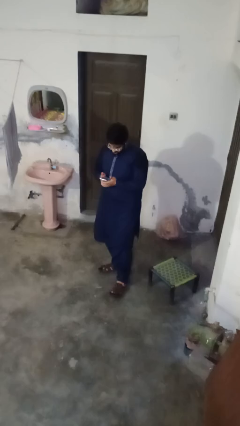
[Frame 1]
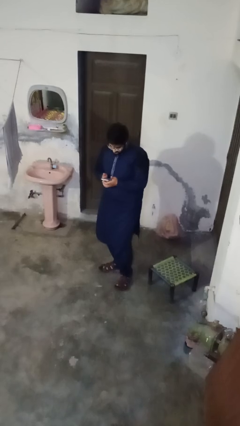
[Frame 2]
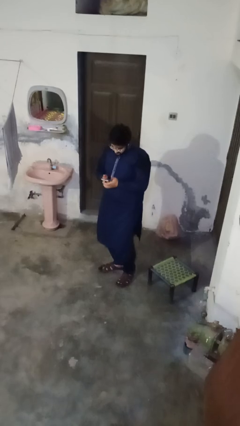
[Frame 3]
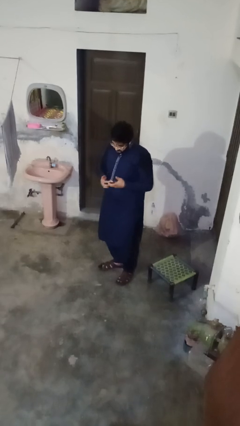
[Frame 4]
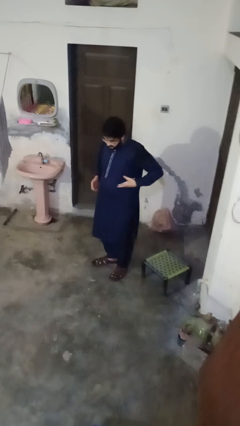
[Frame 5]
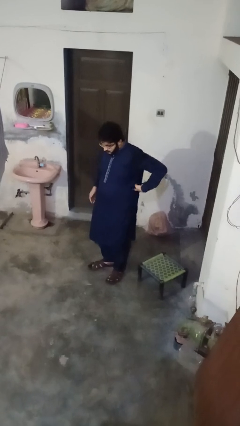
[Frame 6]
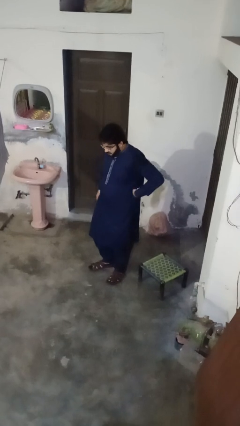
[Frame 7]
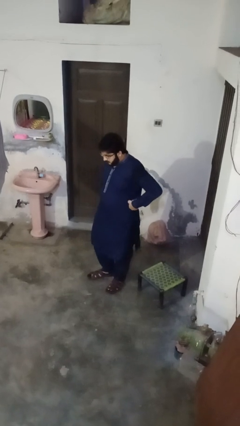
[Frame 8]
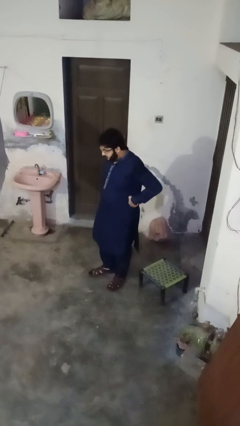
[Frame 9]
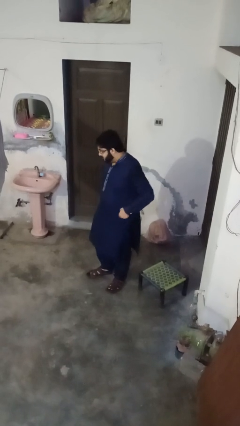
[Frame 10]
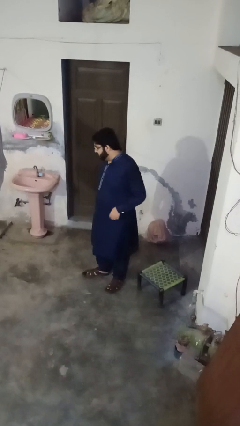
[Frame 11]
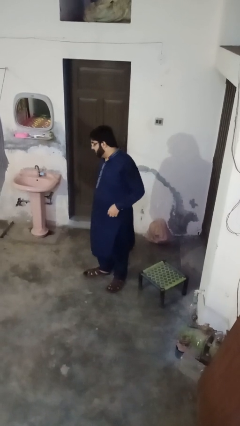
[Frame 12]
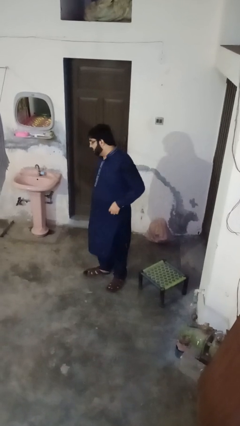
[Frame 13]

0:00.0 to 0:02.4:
person puts phone into pocket

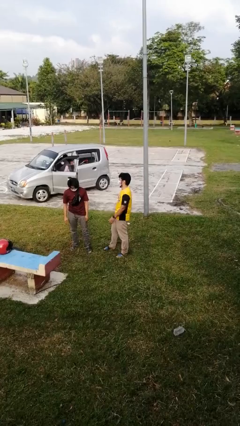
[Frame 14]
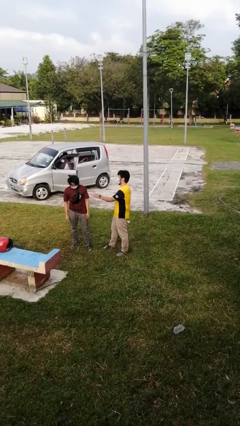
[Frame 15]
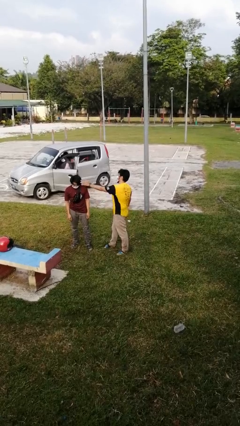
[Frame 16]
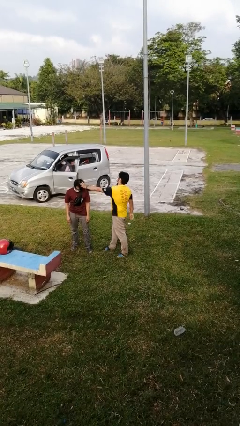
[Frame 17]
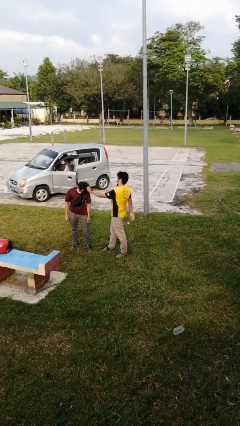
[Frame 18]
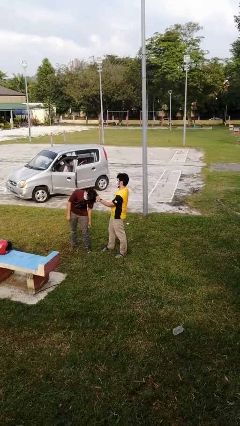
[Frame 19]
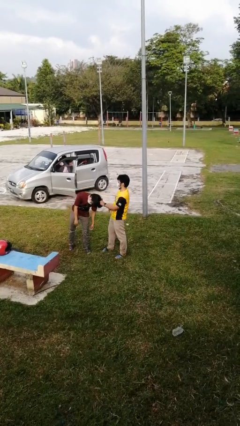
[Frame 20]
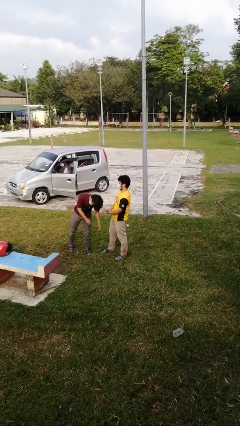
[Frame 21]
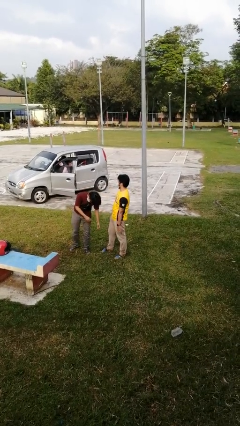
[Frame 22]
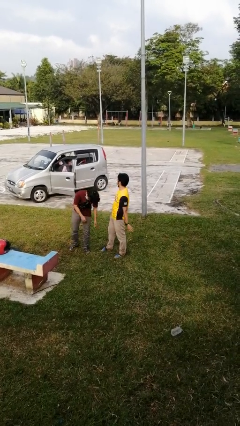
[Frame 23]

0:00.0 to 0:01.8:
person grabs person by hair

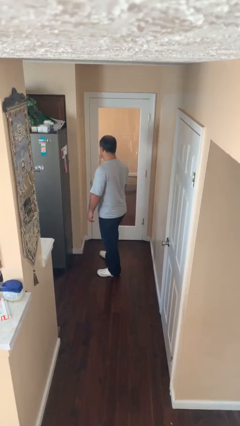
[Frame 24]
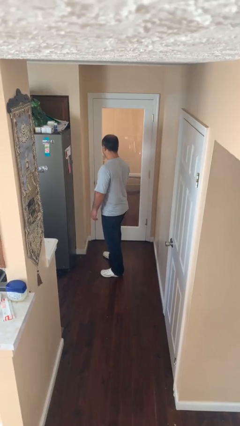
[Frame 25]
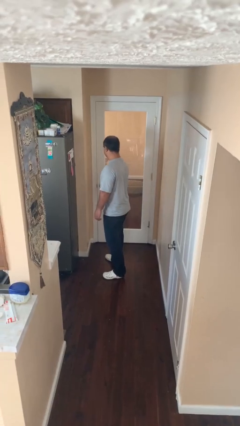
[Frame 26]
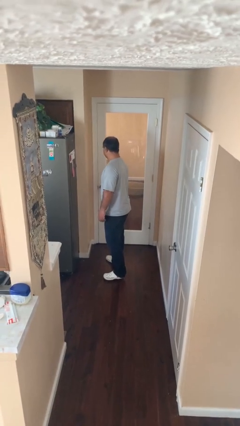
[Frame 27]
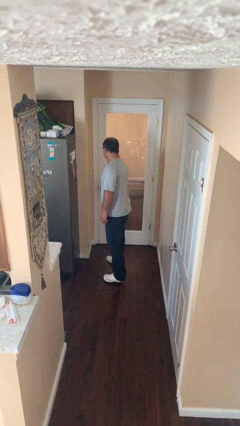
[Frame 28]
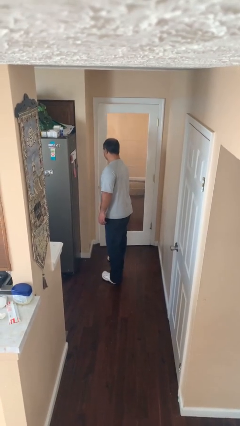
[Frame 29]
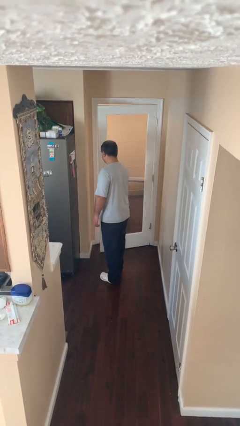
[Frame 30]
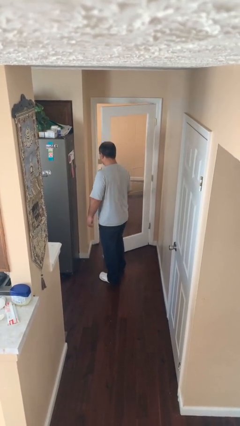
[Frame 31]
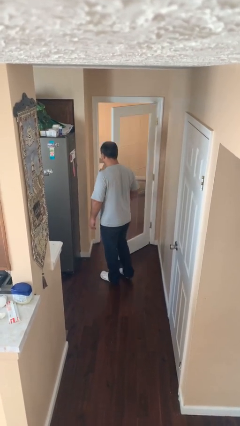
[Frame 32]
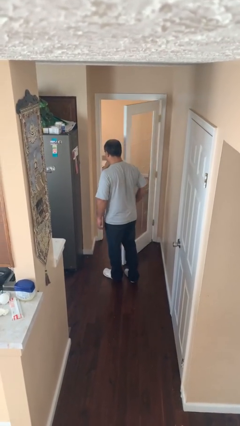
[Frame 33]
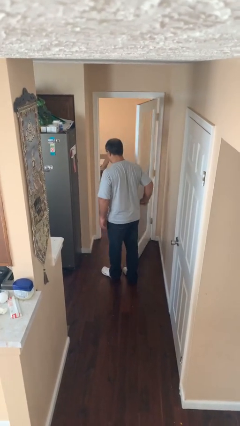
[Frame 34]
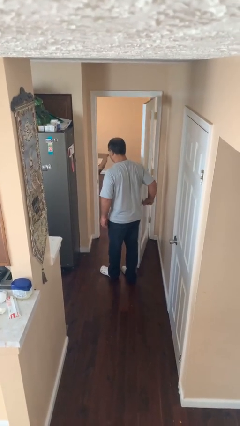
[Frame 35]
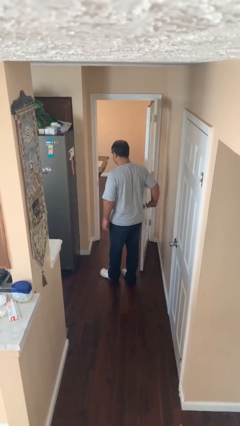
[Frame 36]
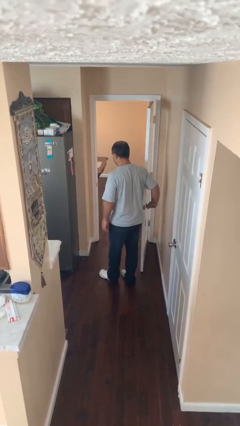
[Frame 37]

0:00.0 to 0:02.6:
person opens facility door

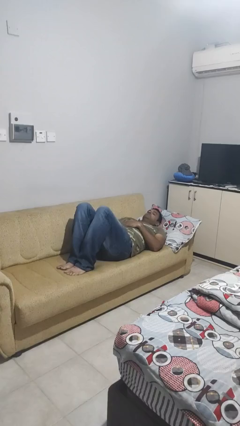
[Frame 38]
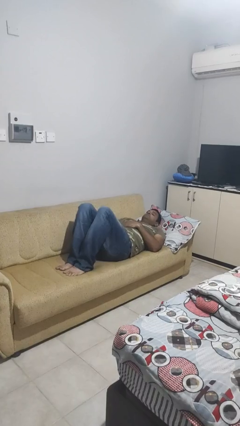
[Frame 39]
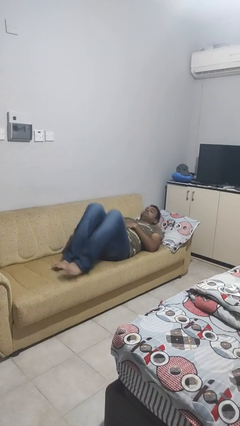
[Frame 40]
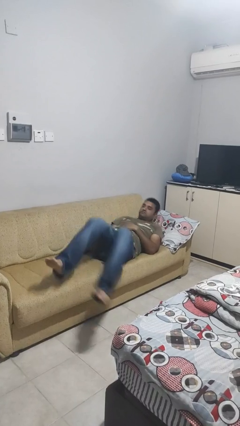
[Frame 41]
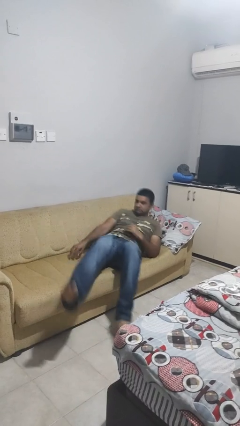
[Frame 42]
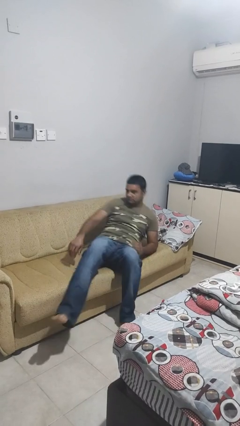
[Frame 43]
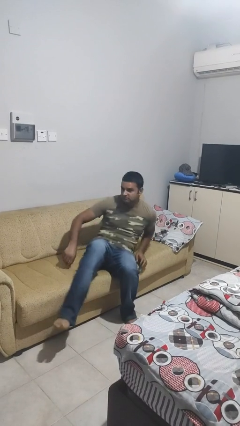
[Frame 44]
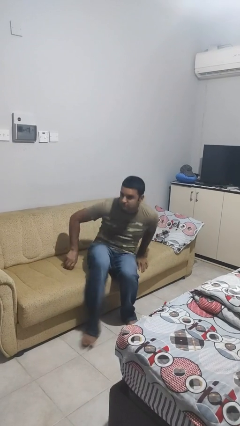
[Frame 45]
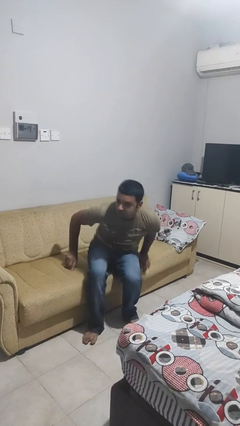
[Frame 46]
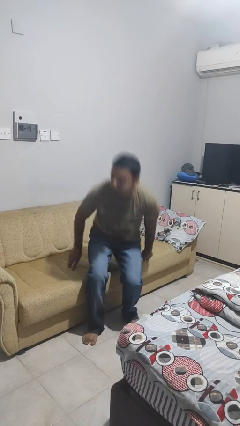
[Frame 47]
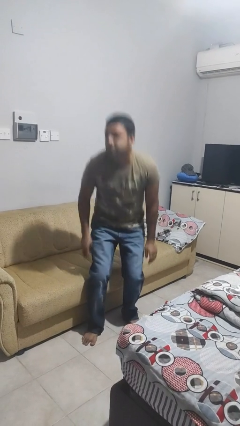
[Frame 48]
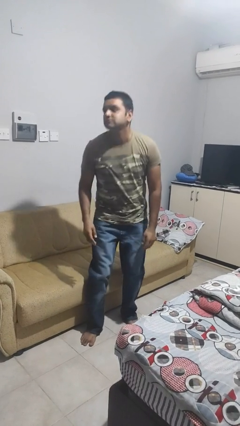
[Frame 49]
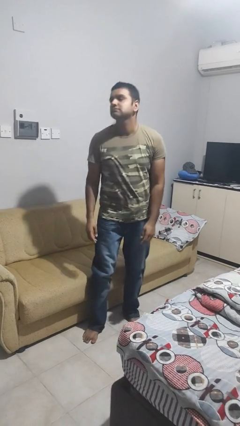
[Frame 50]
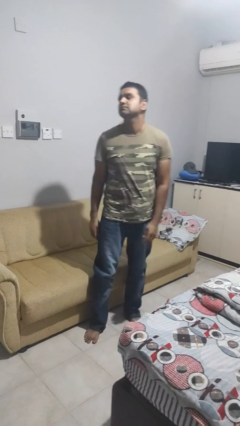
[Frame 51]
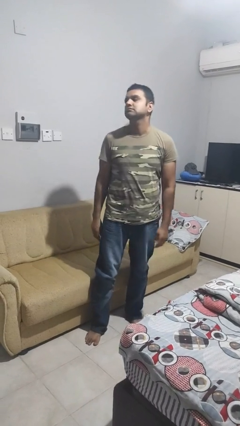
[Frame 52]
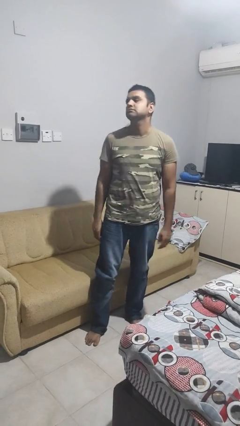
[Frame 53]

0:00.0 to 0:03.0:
person stands up

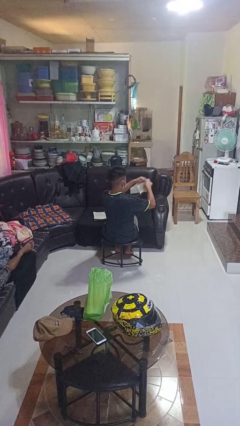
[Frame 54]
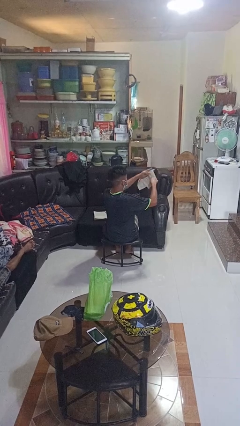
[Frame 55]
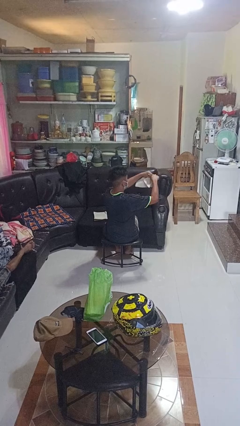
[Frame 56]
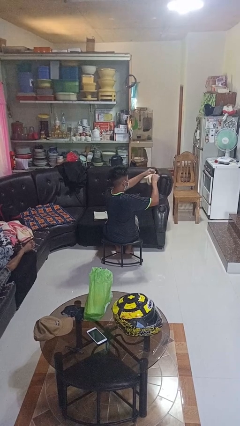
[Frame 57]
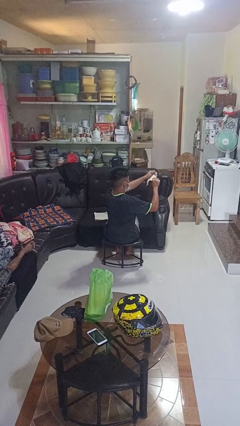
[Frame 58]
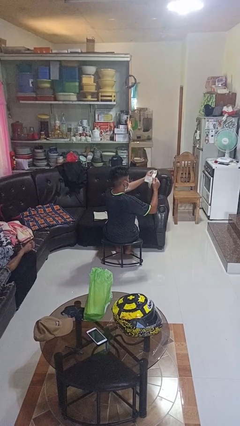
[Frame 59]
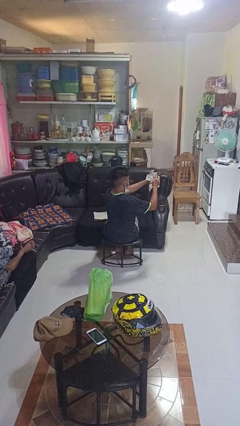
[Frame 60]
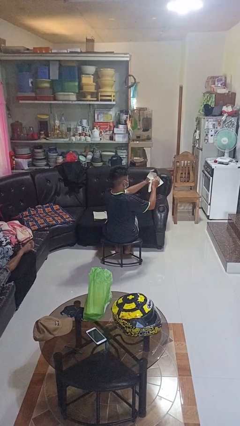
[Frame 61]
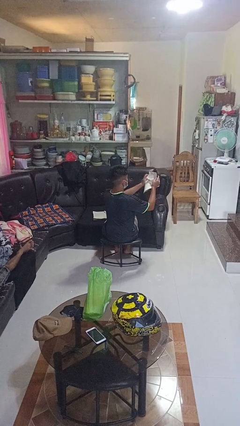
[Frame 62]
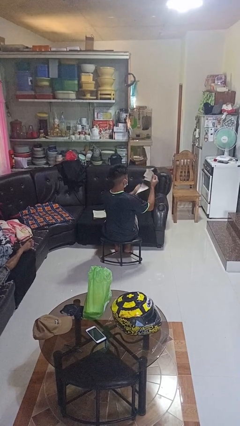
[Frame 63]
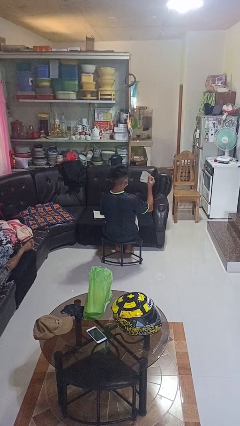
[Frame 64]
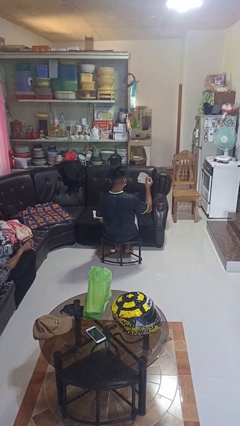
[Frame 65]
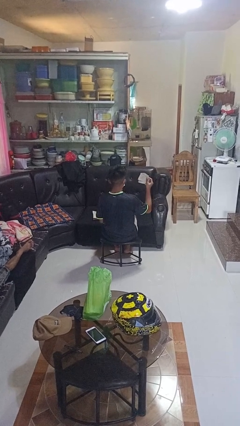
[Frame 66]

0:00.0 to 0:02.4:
person tears paper

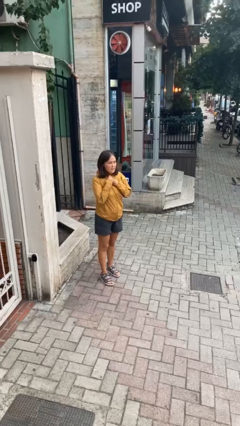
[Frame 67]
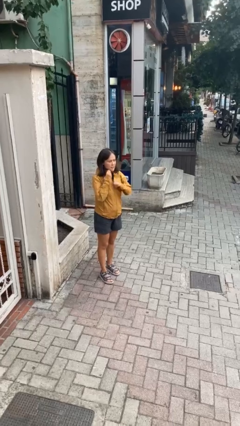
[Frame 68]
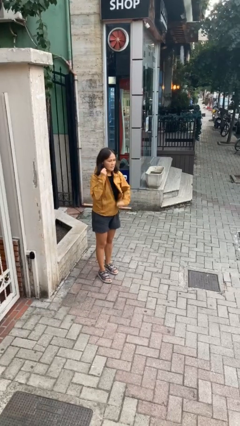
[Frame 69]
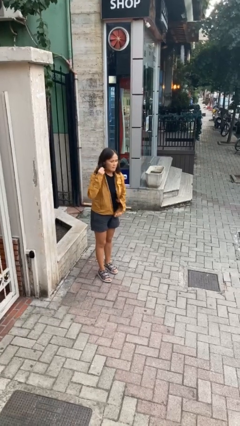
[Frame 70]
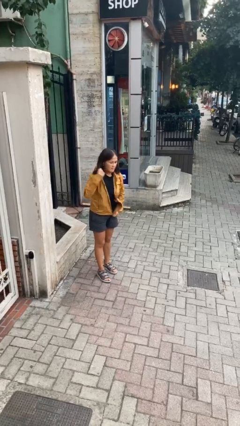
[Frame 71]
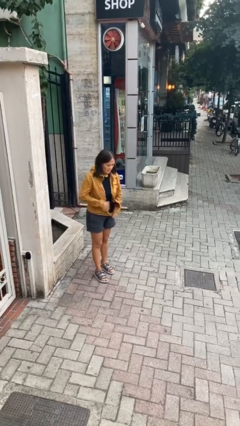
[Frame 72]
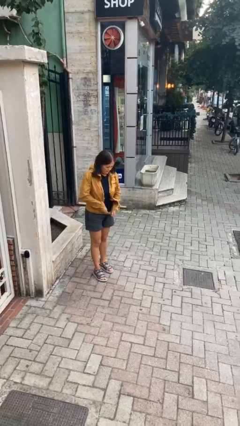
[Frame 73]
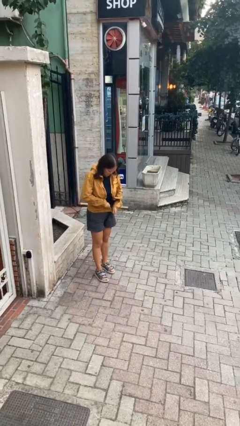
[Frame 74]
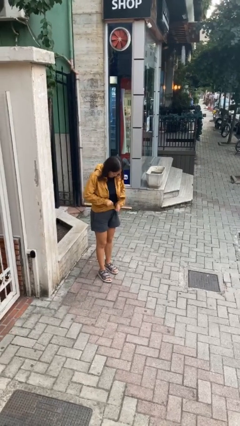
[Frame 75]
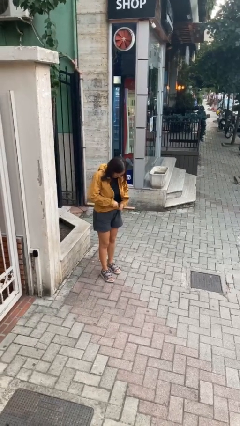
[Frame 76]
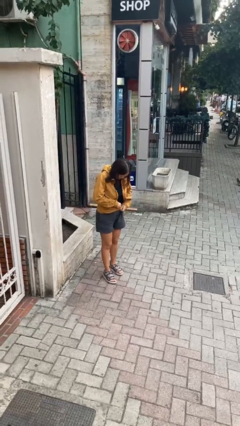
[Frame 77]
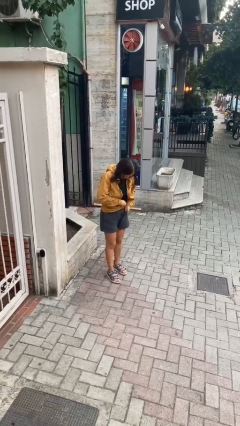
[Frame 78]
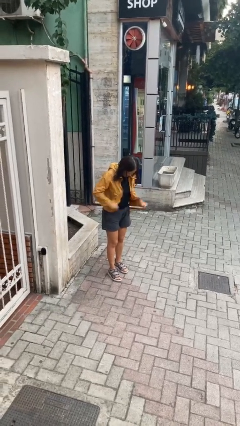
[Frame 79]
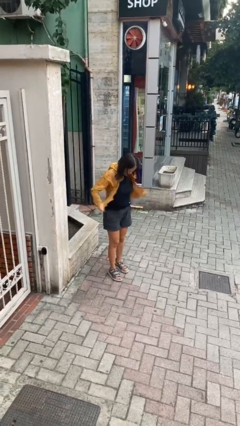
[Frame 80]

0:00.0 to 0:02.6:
person unzips jacket

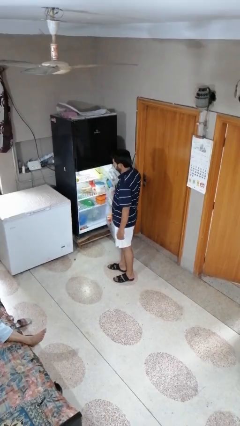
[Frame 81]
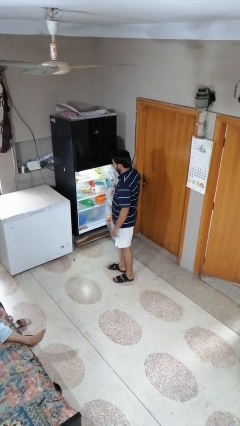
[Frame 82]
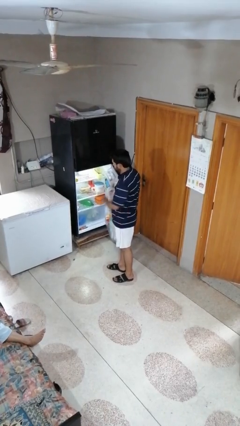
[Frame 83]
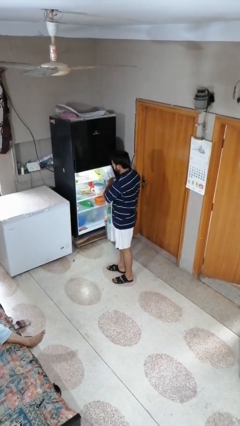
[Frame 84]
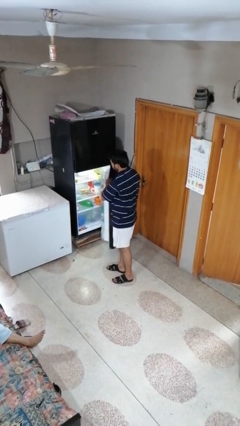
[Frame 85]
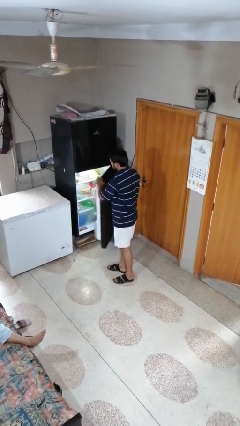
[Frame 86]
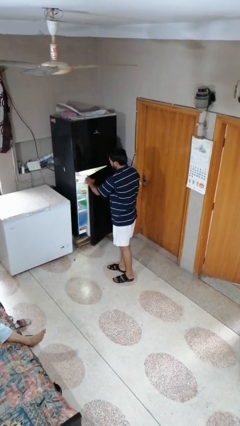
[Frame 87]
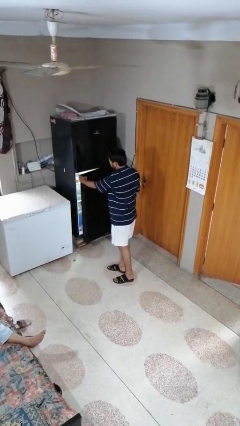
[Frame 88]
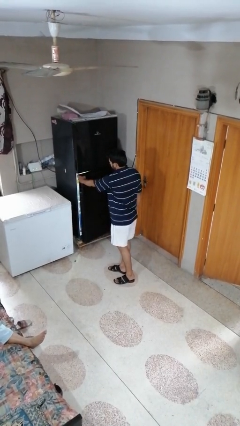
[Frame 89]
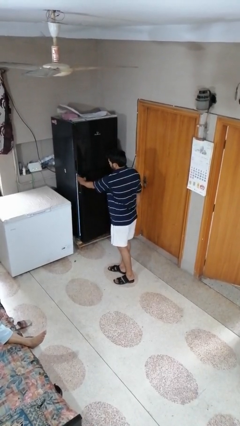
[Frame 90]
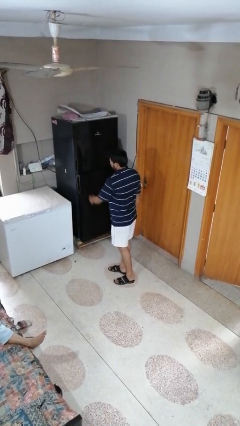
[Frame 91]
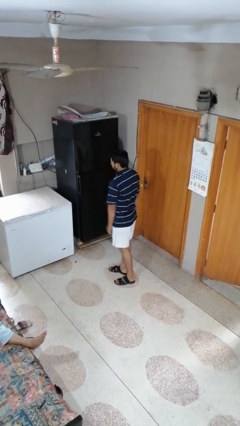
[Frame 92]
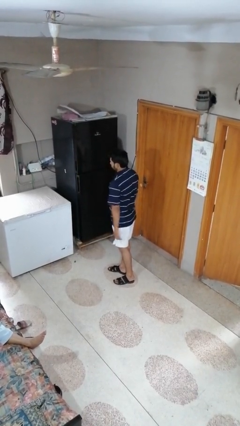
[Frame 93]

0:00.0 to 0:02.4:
person closes refrigerator
